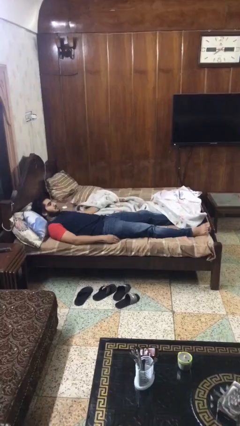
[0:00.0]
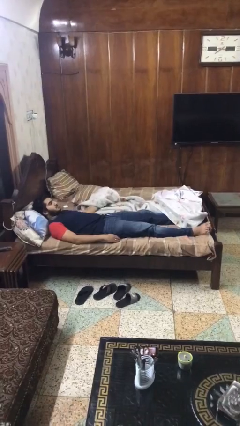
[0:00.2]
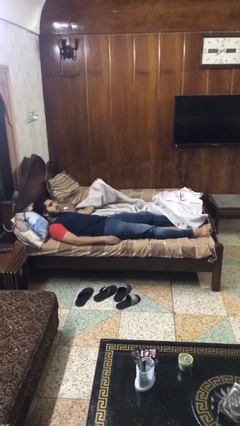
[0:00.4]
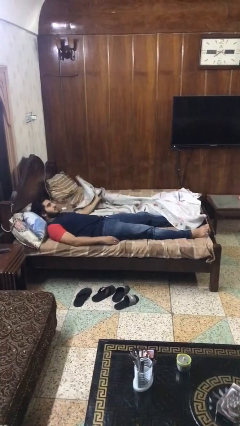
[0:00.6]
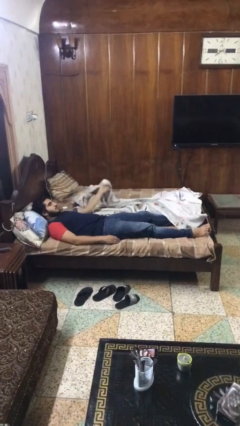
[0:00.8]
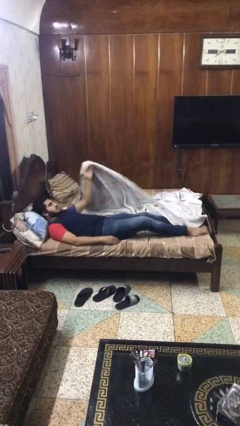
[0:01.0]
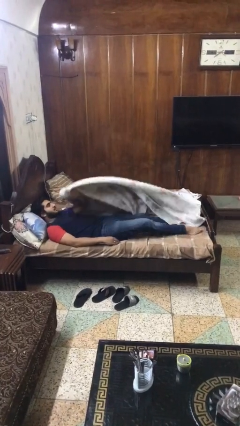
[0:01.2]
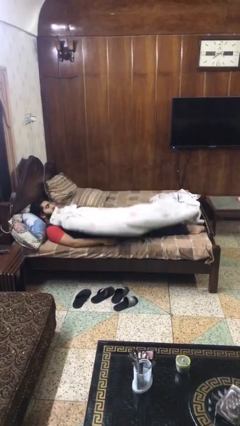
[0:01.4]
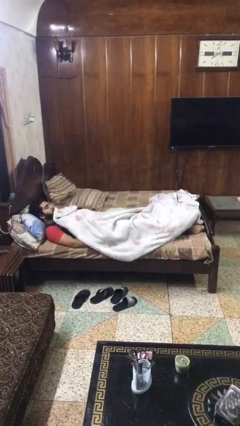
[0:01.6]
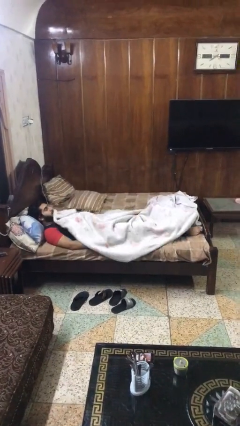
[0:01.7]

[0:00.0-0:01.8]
person covers with blanket

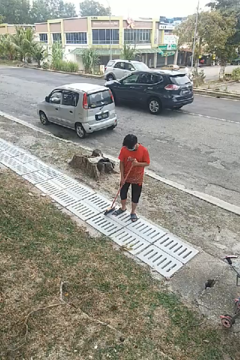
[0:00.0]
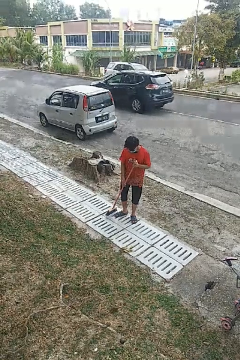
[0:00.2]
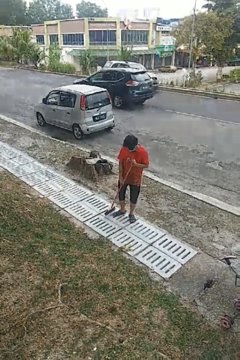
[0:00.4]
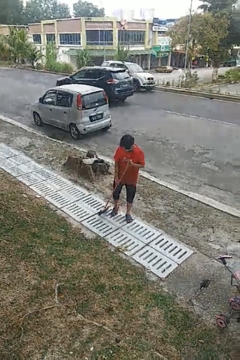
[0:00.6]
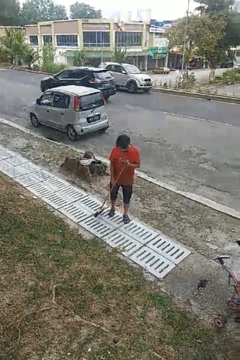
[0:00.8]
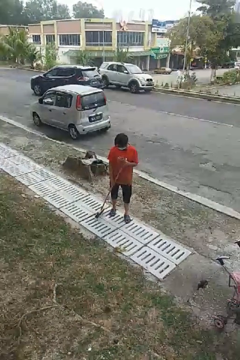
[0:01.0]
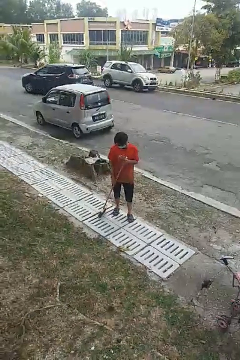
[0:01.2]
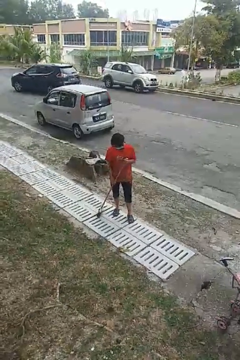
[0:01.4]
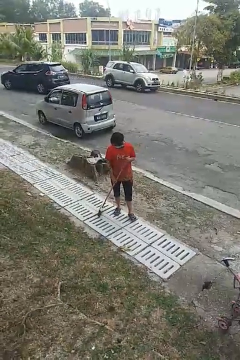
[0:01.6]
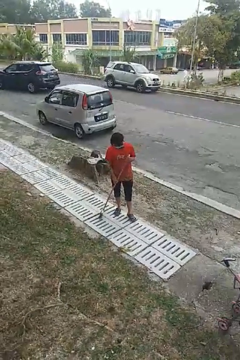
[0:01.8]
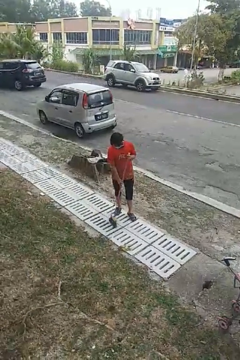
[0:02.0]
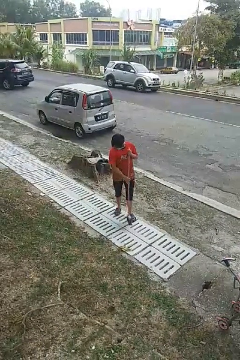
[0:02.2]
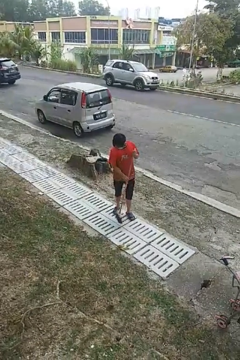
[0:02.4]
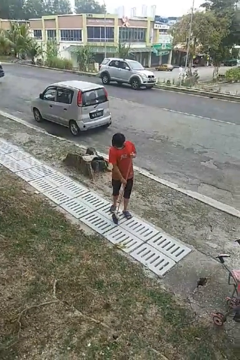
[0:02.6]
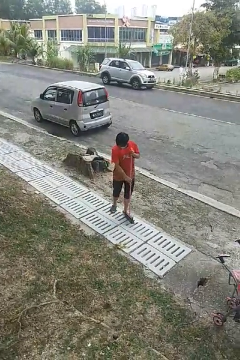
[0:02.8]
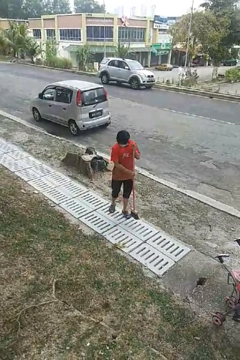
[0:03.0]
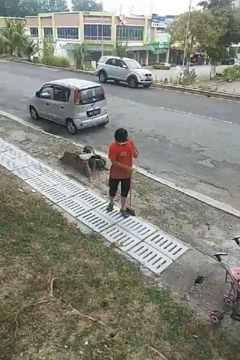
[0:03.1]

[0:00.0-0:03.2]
person sweeps floor

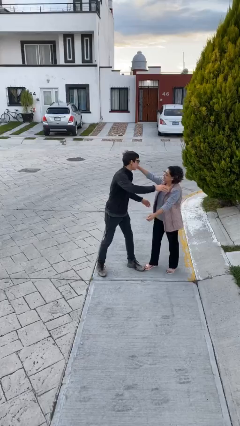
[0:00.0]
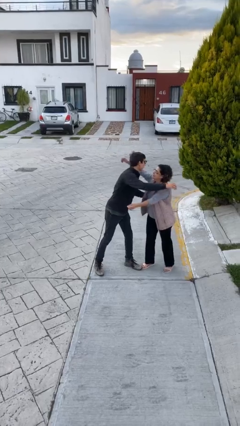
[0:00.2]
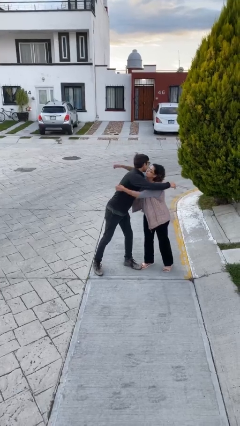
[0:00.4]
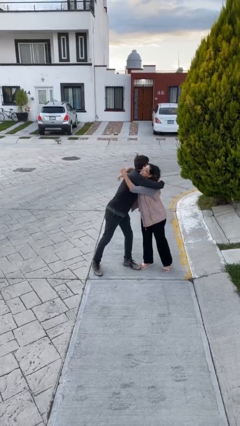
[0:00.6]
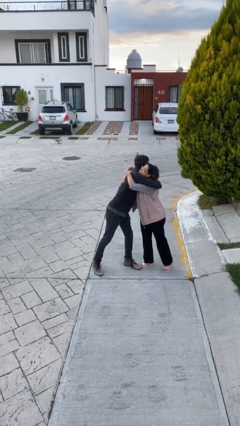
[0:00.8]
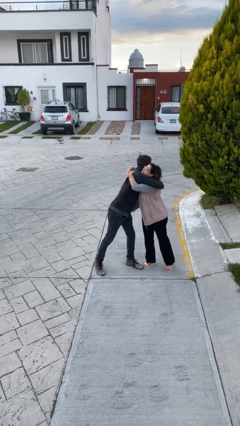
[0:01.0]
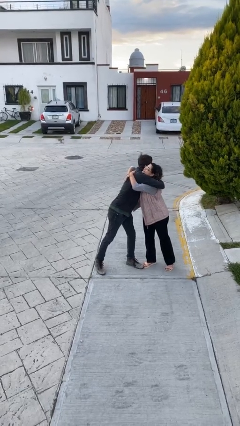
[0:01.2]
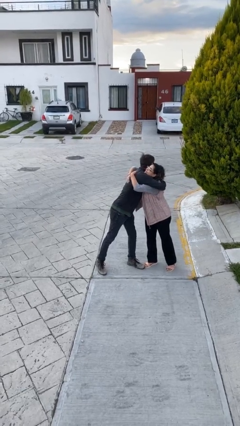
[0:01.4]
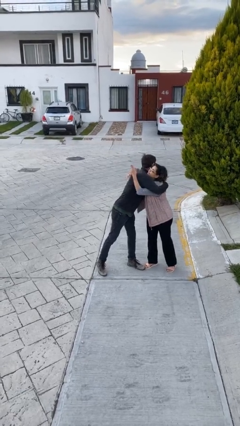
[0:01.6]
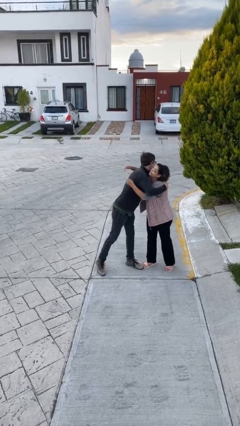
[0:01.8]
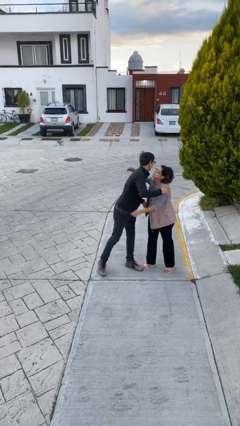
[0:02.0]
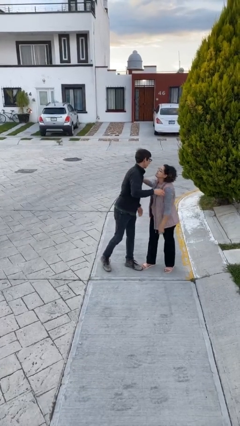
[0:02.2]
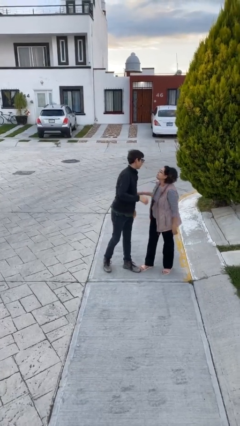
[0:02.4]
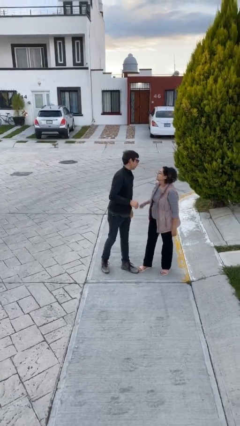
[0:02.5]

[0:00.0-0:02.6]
person embraces person

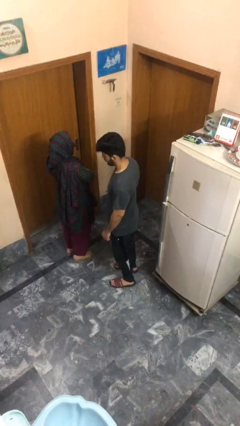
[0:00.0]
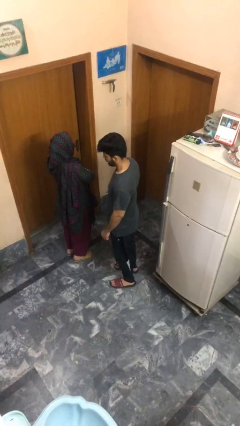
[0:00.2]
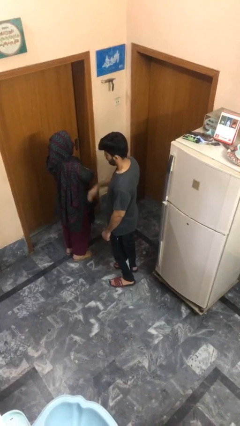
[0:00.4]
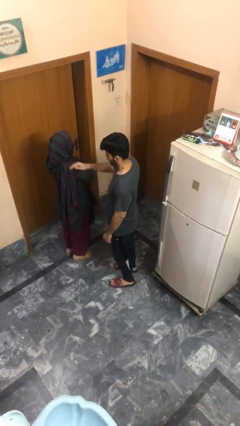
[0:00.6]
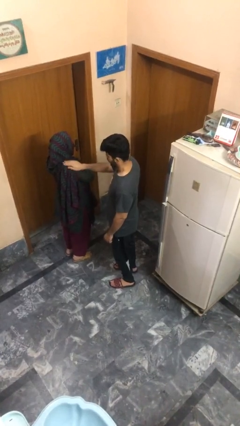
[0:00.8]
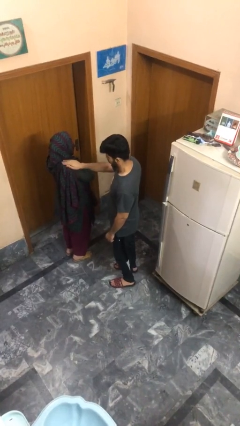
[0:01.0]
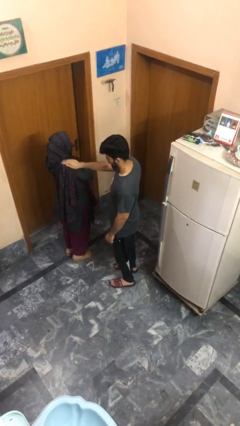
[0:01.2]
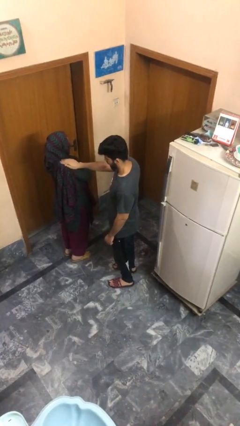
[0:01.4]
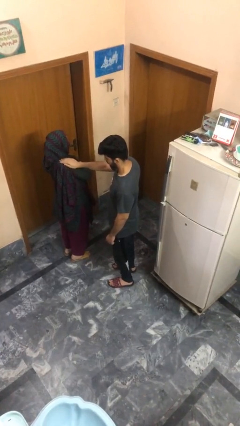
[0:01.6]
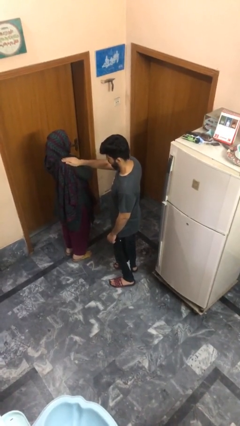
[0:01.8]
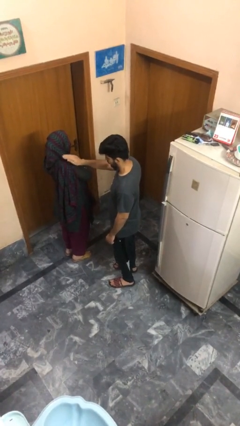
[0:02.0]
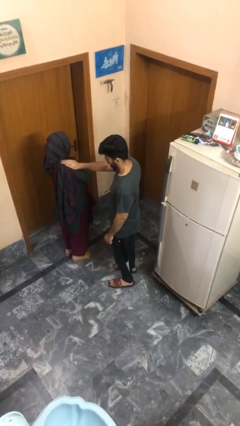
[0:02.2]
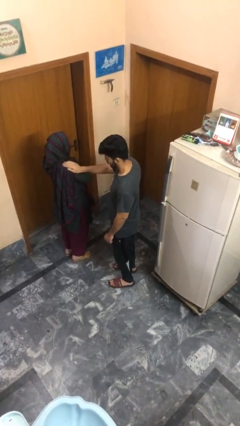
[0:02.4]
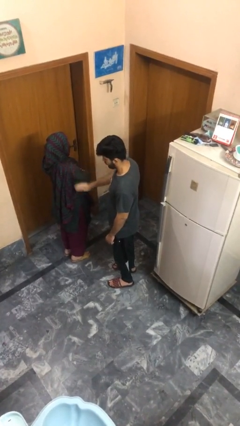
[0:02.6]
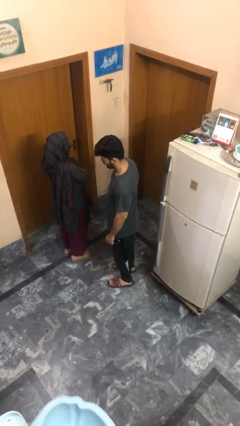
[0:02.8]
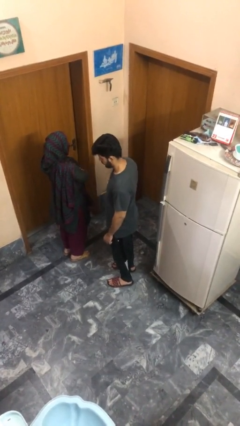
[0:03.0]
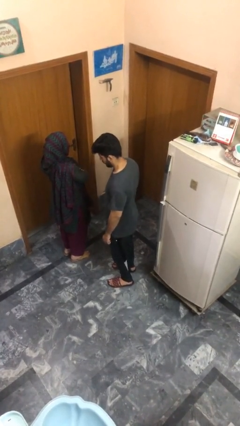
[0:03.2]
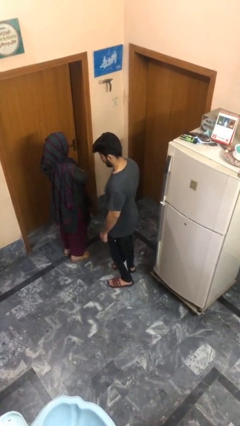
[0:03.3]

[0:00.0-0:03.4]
person pounds shoulders of person

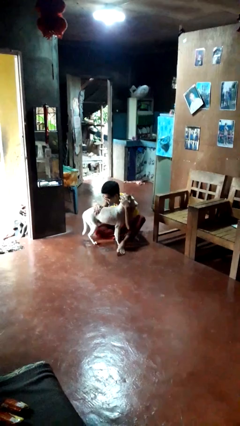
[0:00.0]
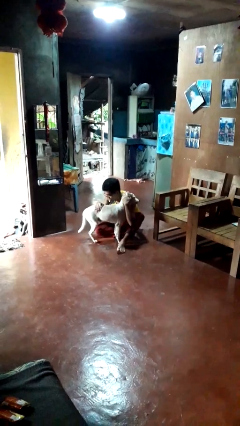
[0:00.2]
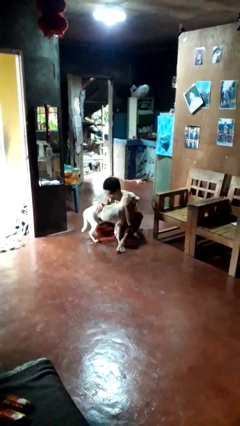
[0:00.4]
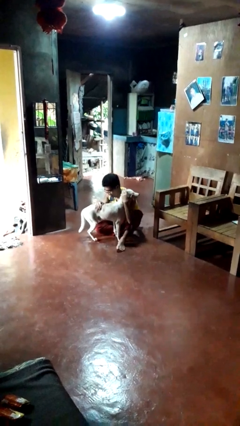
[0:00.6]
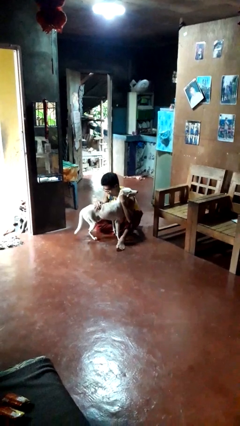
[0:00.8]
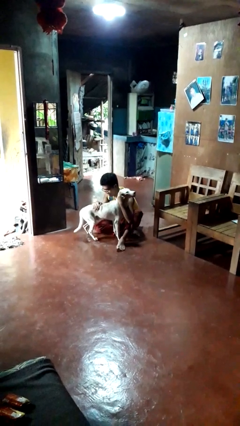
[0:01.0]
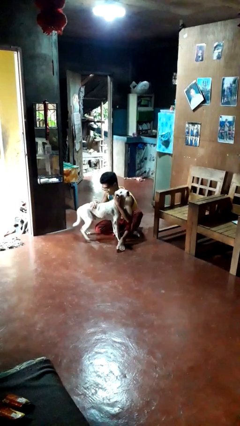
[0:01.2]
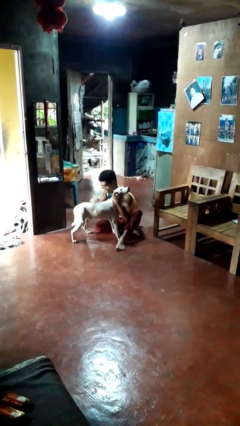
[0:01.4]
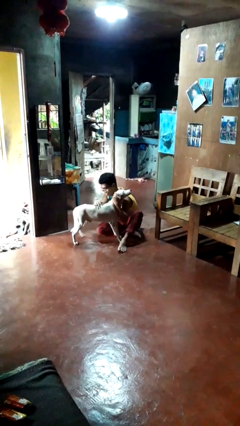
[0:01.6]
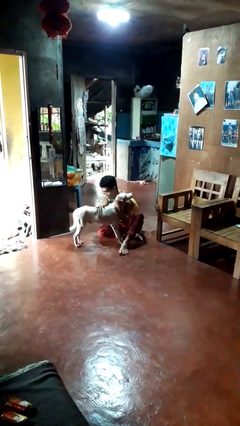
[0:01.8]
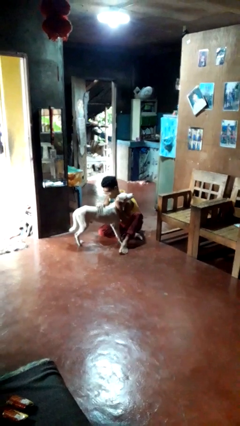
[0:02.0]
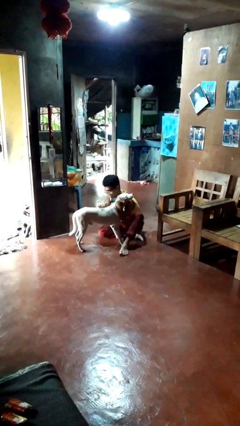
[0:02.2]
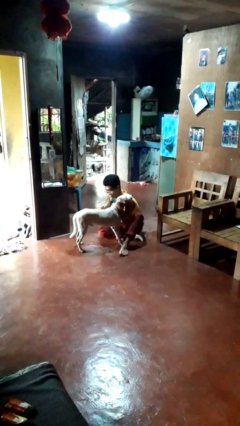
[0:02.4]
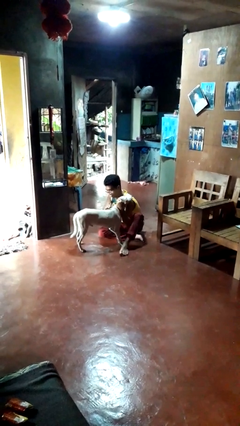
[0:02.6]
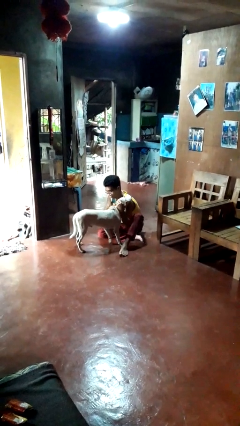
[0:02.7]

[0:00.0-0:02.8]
person hugs dog

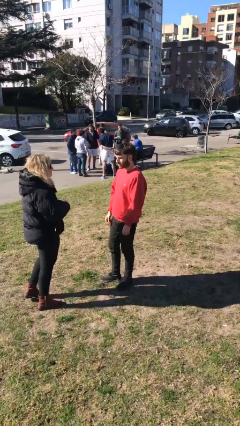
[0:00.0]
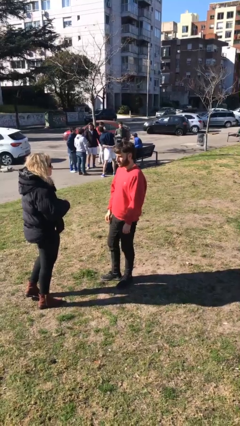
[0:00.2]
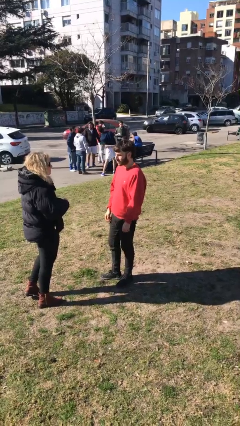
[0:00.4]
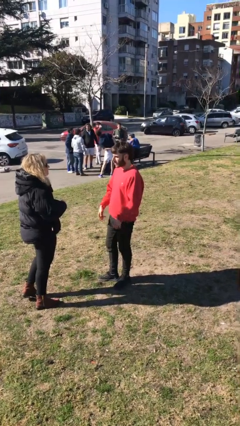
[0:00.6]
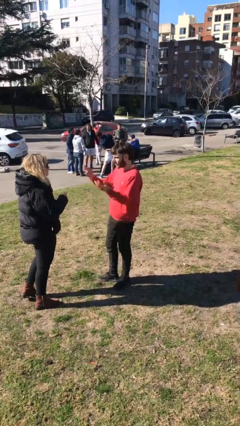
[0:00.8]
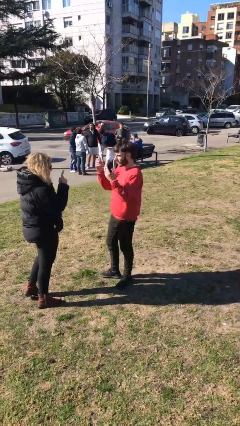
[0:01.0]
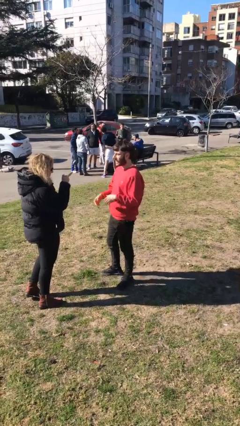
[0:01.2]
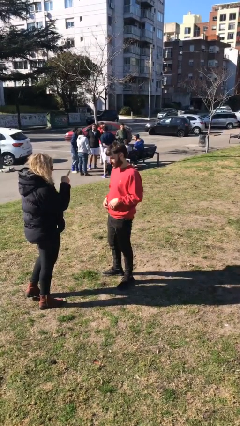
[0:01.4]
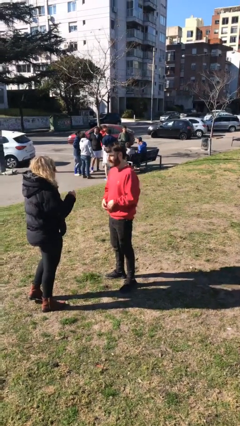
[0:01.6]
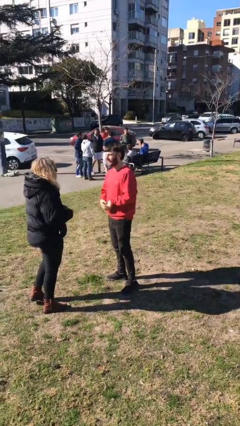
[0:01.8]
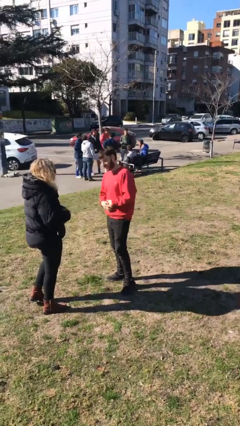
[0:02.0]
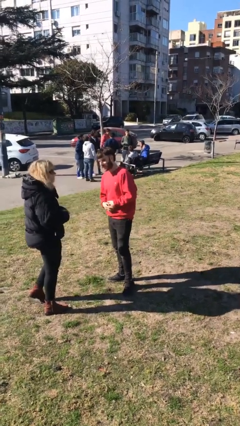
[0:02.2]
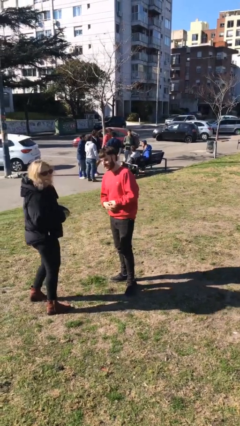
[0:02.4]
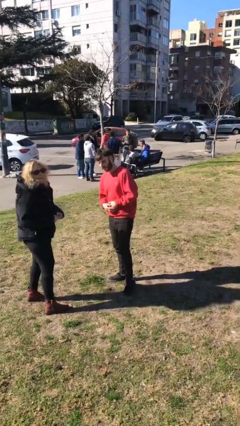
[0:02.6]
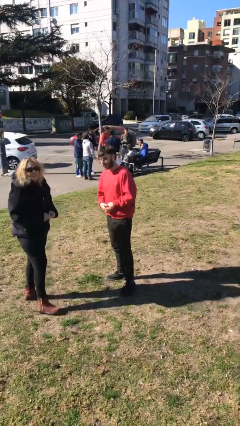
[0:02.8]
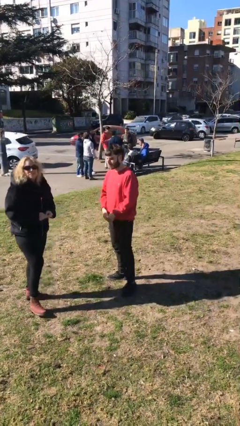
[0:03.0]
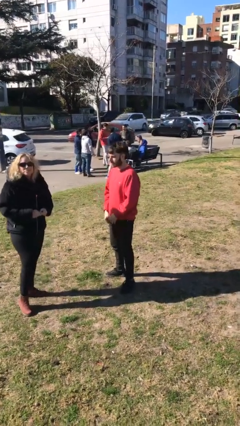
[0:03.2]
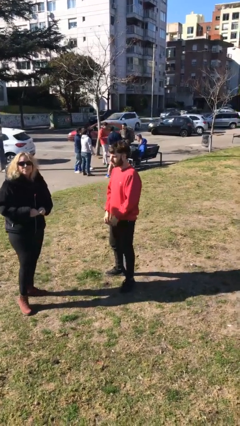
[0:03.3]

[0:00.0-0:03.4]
person talks to person

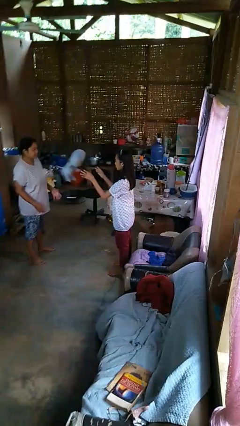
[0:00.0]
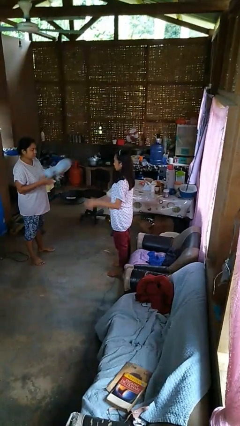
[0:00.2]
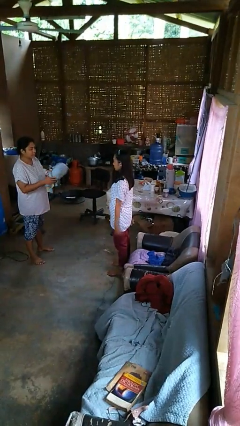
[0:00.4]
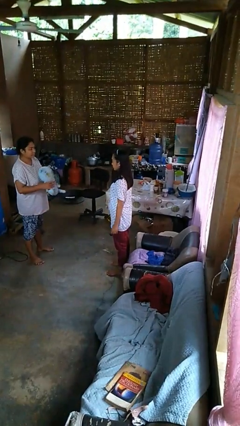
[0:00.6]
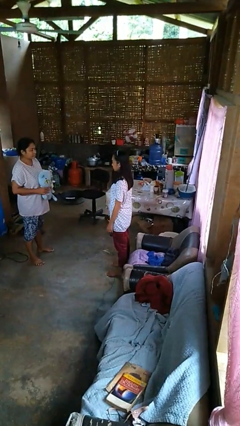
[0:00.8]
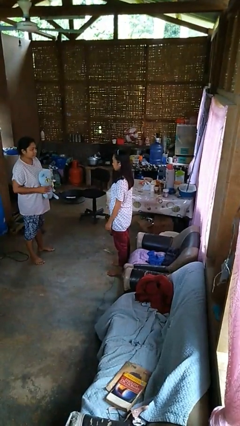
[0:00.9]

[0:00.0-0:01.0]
person throws object to person
